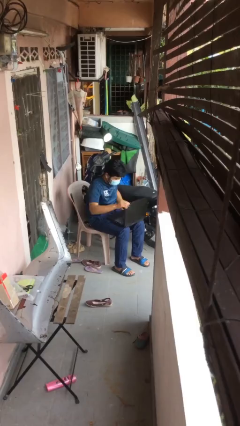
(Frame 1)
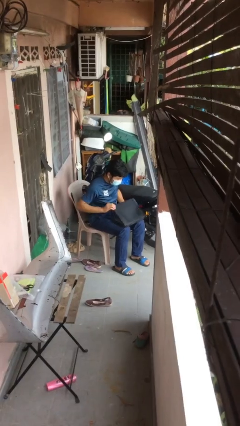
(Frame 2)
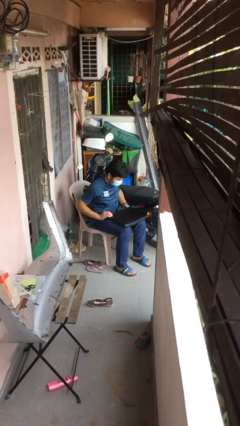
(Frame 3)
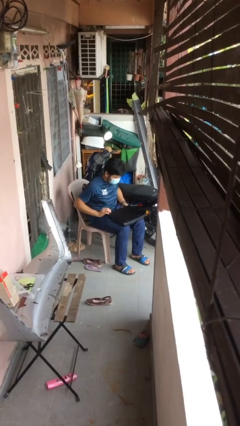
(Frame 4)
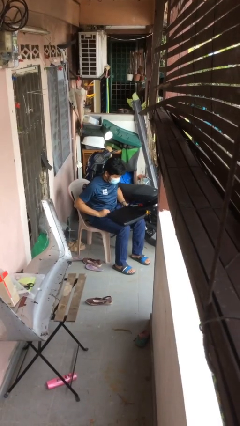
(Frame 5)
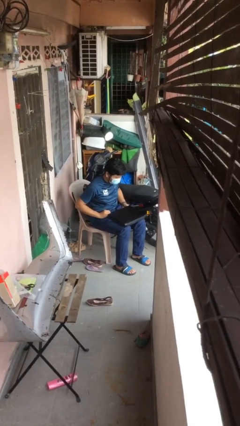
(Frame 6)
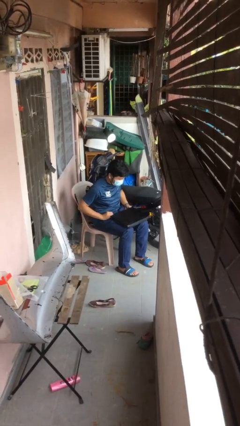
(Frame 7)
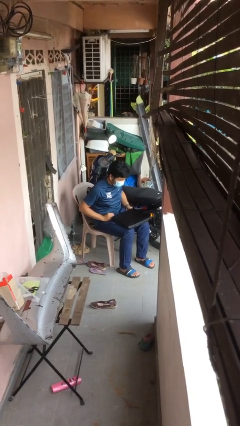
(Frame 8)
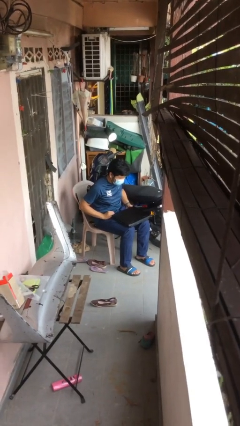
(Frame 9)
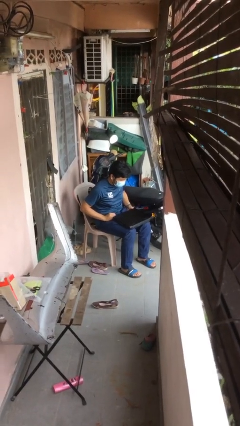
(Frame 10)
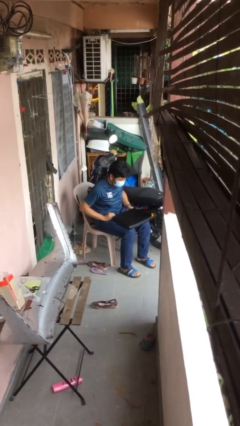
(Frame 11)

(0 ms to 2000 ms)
person closes laptop

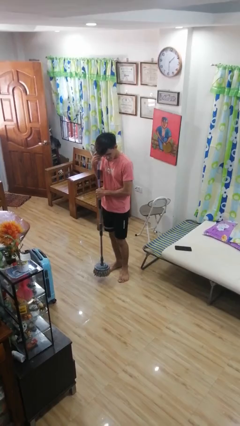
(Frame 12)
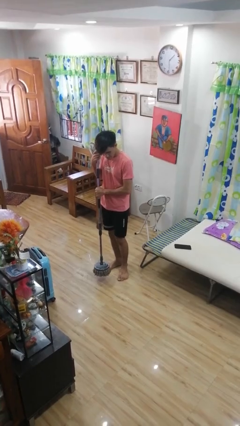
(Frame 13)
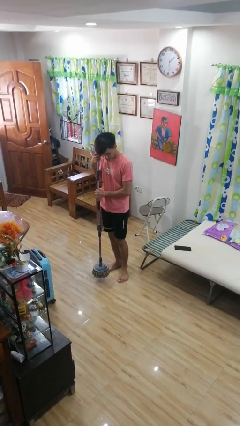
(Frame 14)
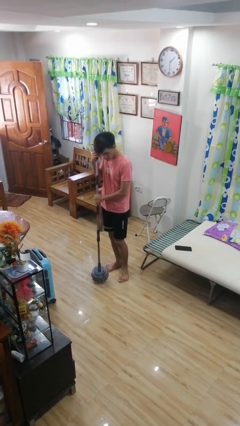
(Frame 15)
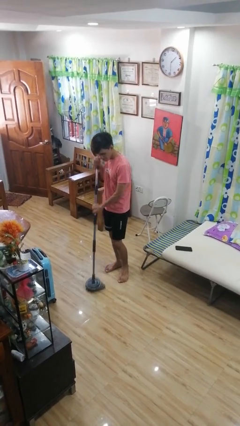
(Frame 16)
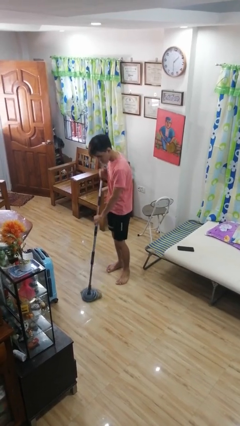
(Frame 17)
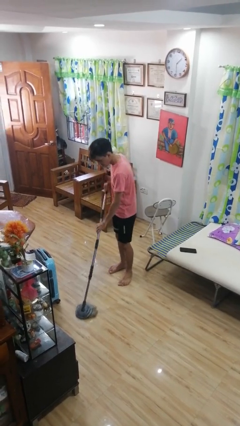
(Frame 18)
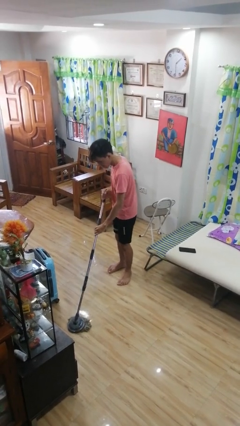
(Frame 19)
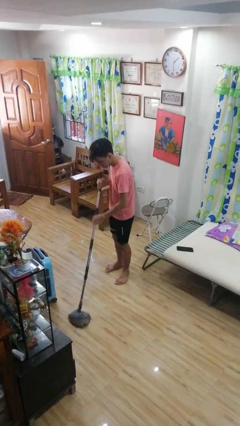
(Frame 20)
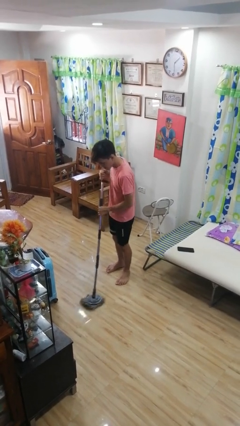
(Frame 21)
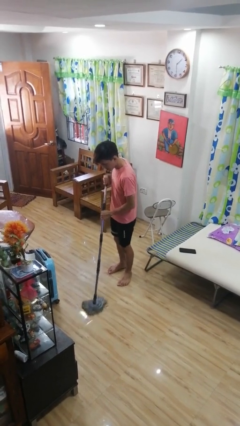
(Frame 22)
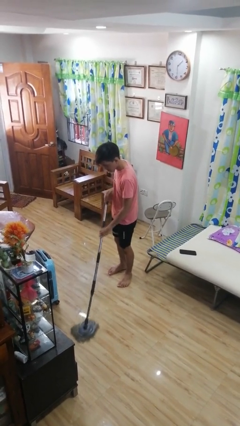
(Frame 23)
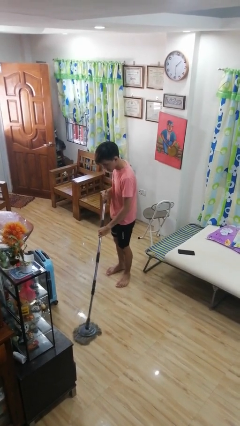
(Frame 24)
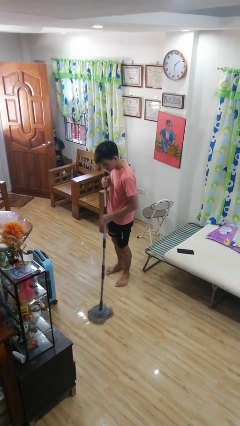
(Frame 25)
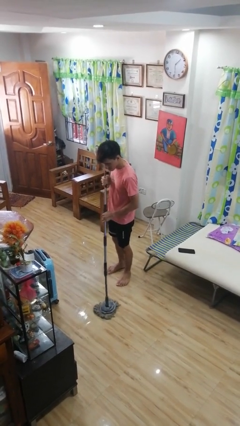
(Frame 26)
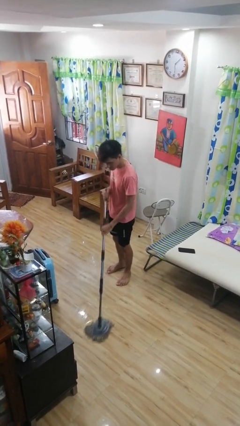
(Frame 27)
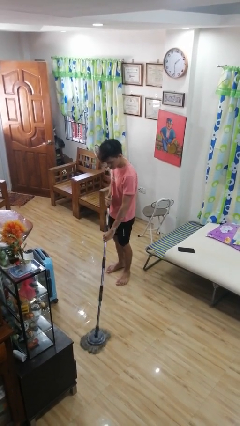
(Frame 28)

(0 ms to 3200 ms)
person mops

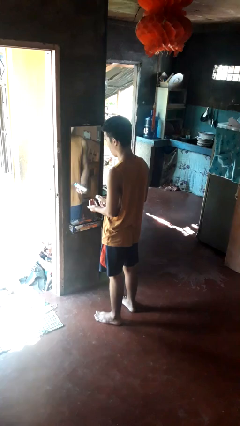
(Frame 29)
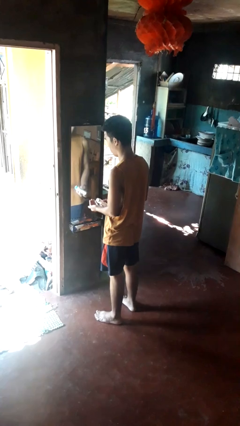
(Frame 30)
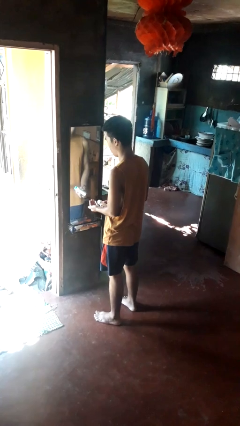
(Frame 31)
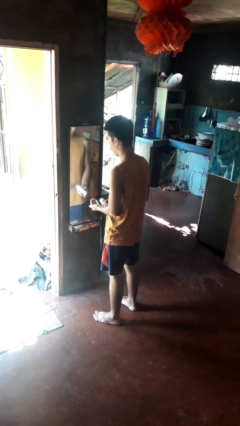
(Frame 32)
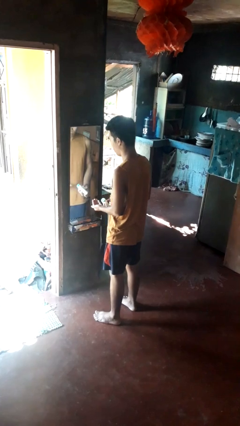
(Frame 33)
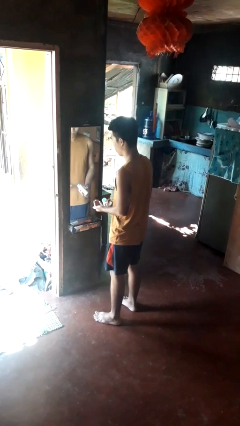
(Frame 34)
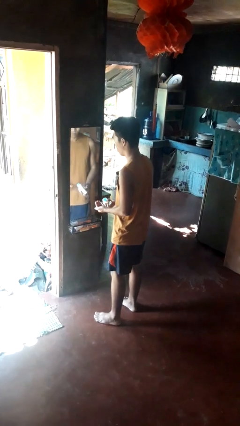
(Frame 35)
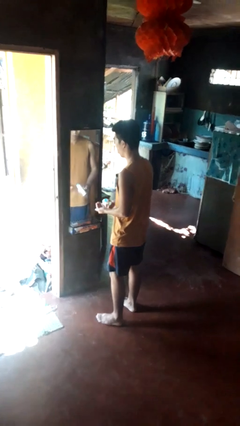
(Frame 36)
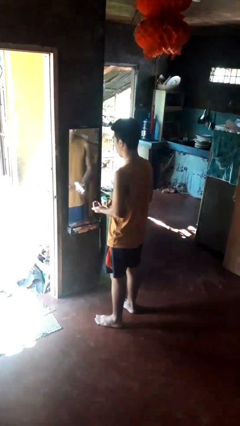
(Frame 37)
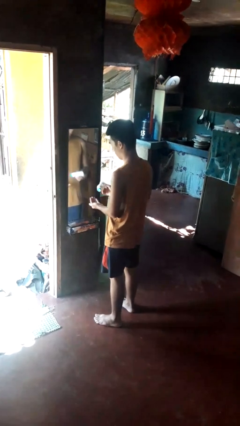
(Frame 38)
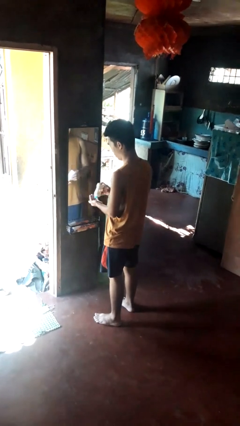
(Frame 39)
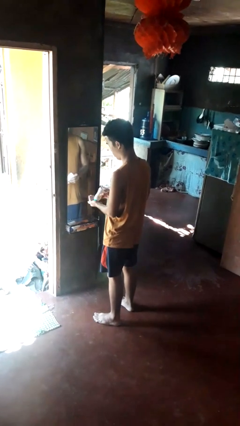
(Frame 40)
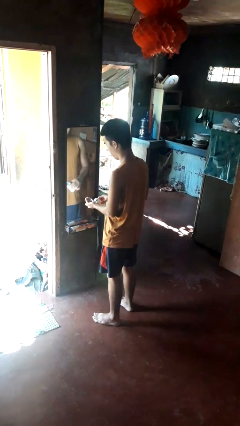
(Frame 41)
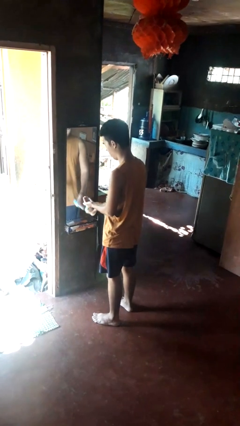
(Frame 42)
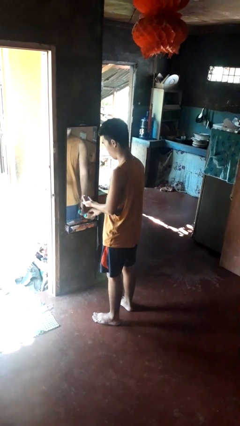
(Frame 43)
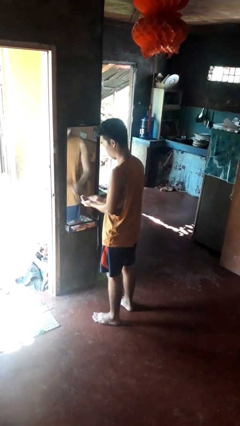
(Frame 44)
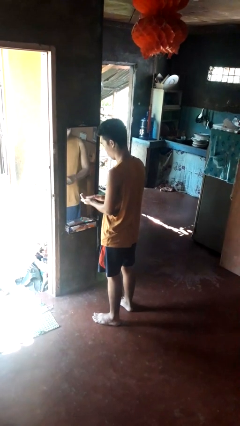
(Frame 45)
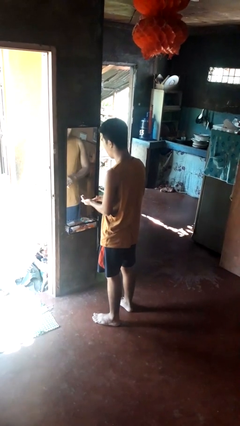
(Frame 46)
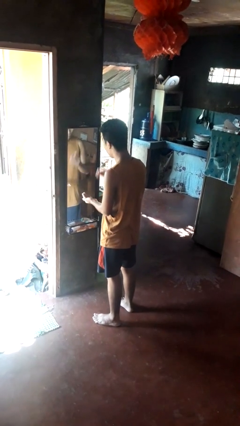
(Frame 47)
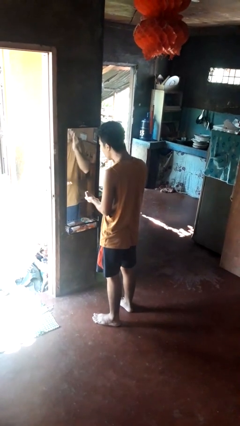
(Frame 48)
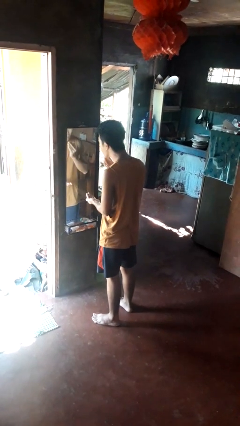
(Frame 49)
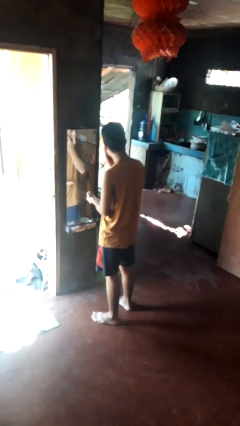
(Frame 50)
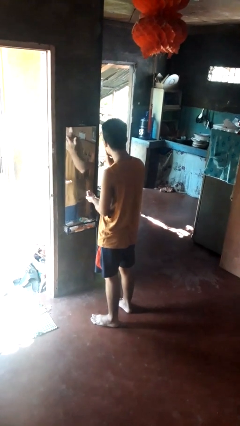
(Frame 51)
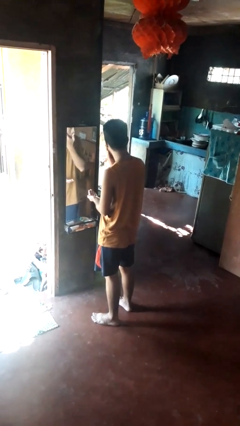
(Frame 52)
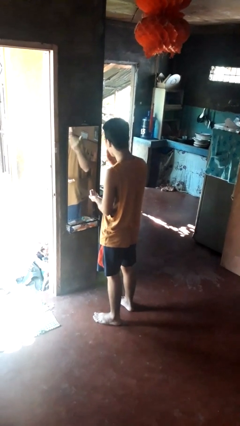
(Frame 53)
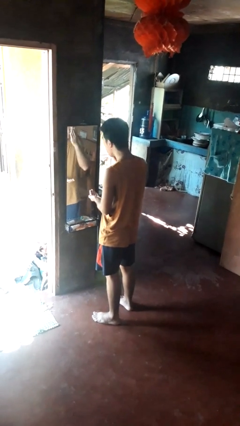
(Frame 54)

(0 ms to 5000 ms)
person applies foundation makeup

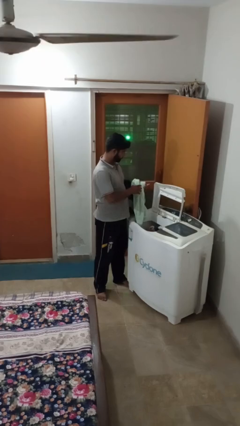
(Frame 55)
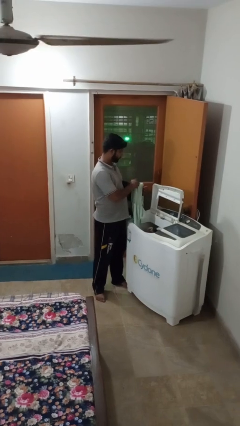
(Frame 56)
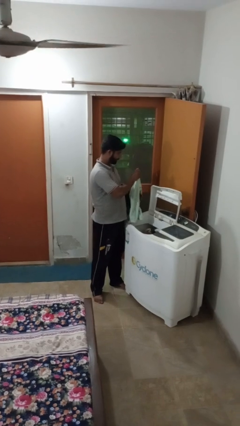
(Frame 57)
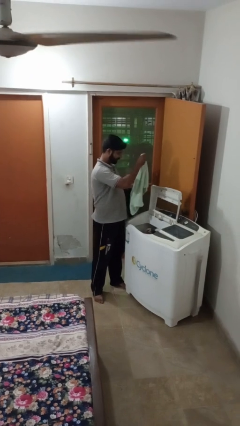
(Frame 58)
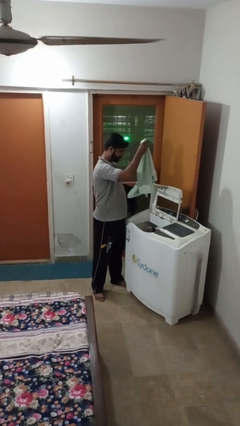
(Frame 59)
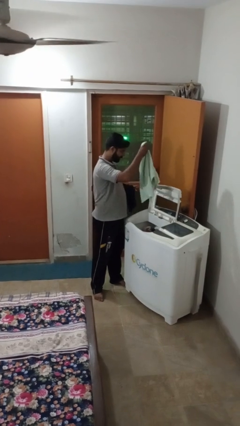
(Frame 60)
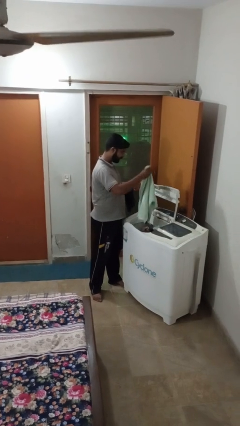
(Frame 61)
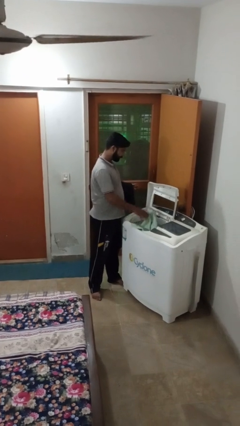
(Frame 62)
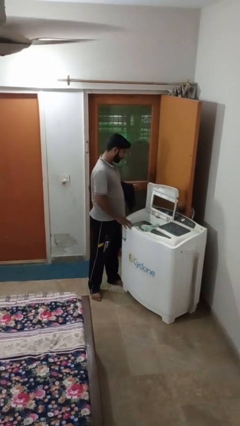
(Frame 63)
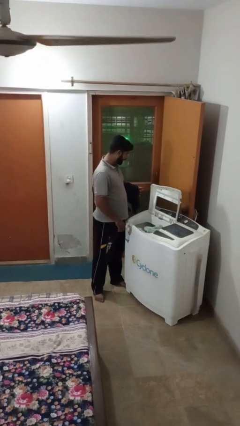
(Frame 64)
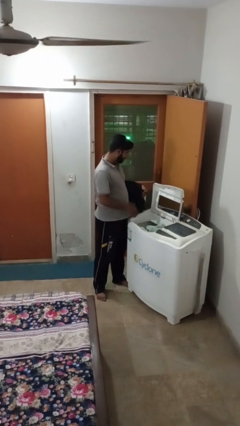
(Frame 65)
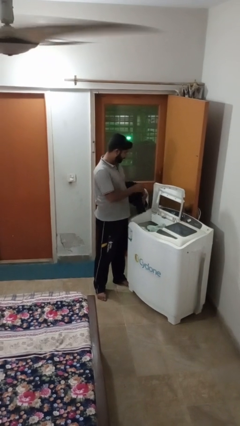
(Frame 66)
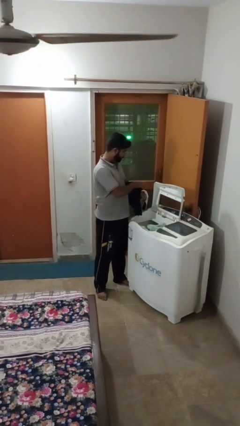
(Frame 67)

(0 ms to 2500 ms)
person loads clotheswasher

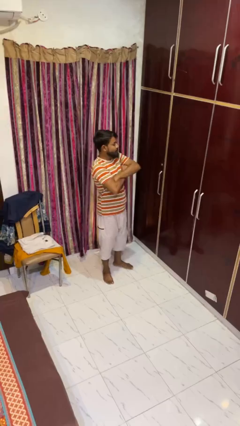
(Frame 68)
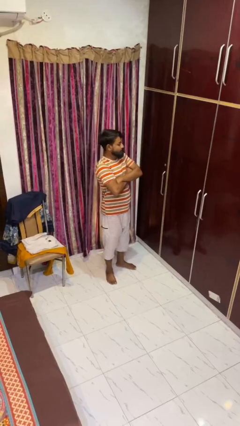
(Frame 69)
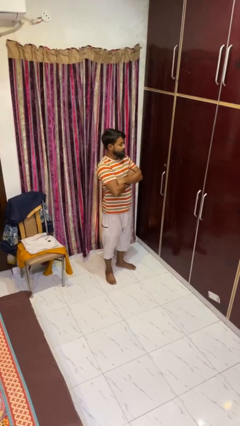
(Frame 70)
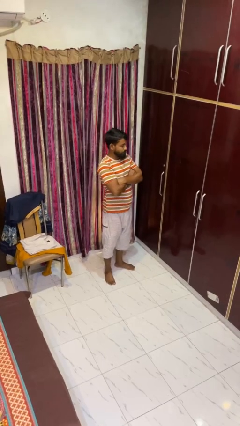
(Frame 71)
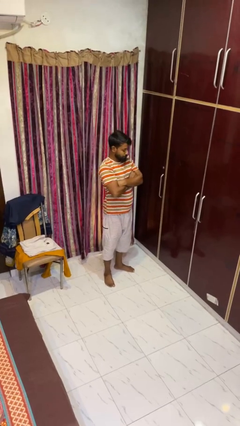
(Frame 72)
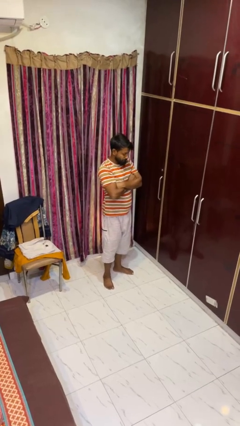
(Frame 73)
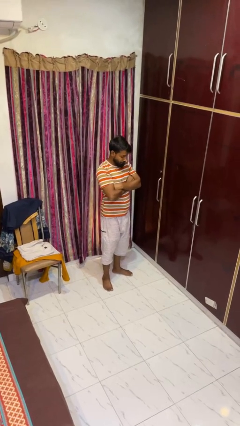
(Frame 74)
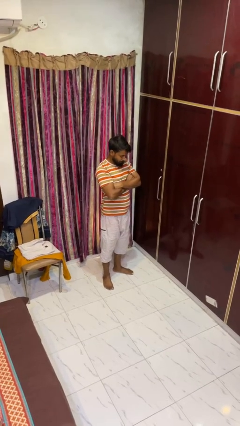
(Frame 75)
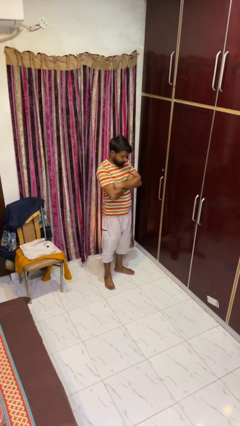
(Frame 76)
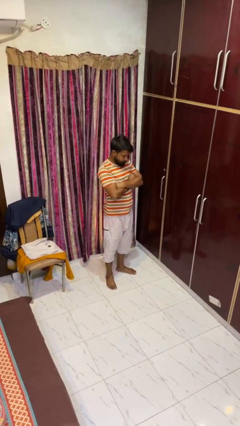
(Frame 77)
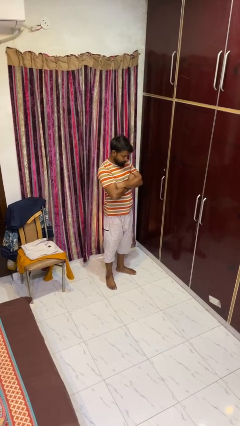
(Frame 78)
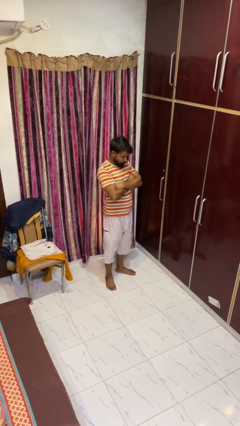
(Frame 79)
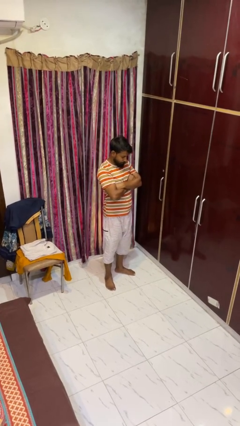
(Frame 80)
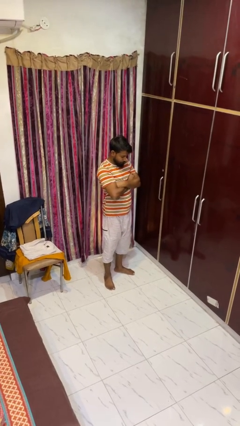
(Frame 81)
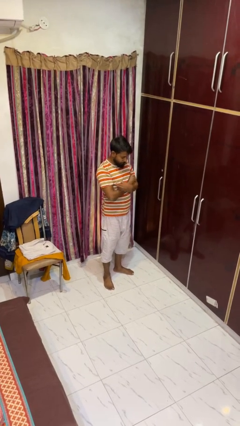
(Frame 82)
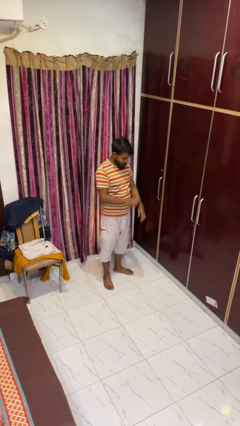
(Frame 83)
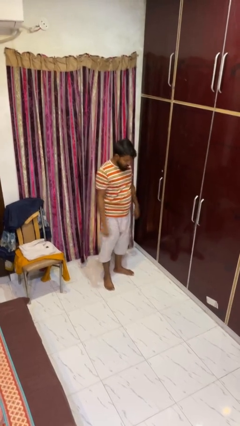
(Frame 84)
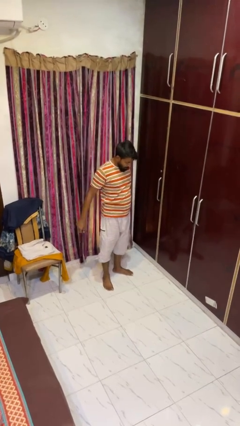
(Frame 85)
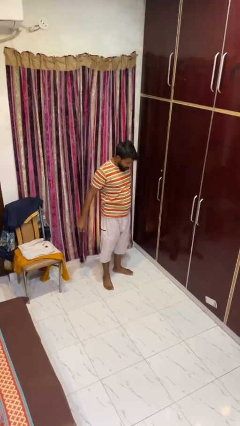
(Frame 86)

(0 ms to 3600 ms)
person crosses arms

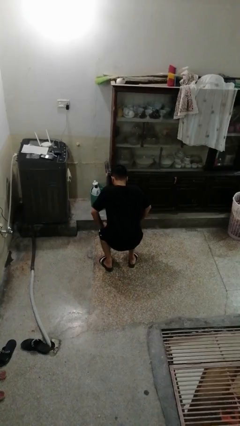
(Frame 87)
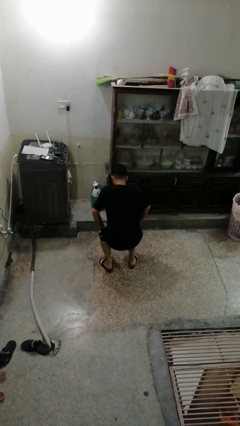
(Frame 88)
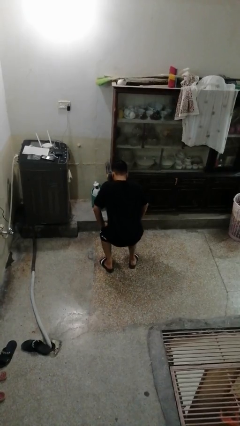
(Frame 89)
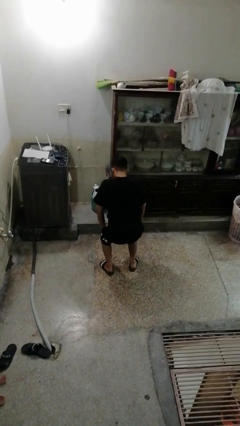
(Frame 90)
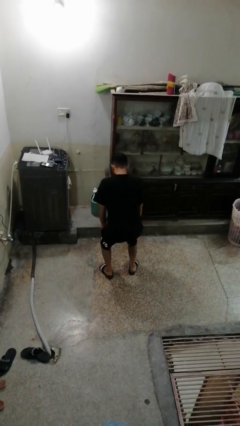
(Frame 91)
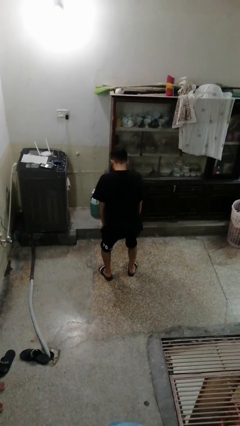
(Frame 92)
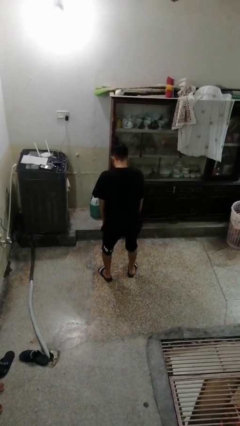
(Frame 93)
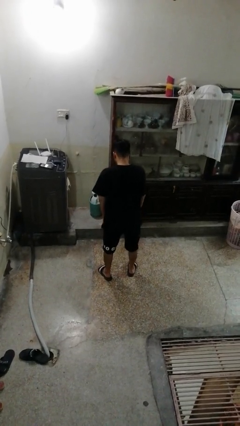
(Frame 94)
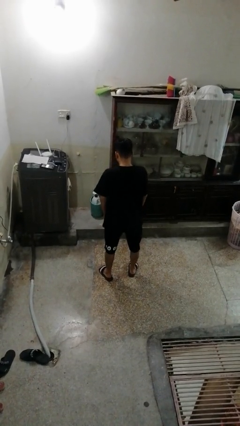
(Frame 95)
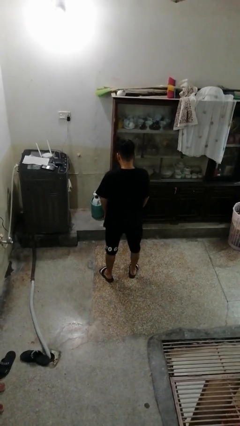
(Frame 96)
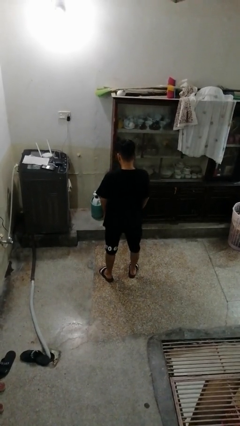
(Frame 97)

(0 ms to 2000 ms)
person stands up
